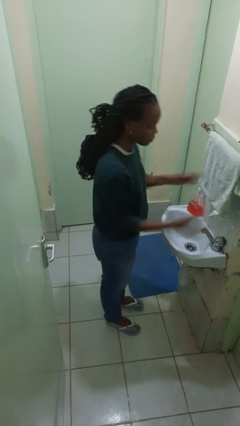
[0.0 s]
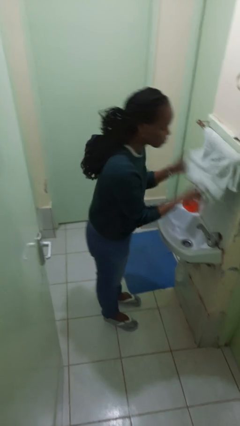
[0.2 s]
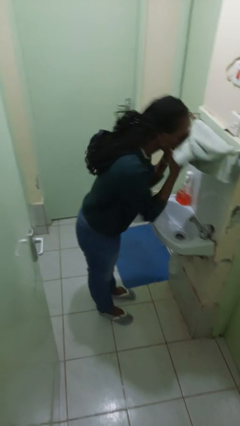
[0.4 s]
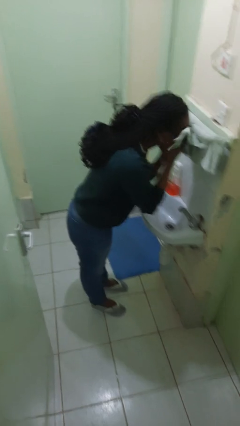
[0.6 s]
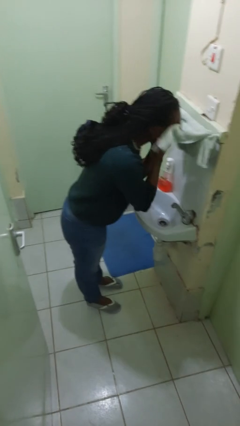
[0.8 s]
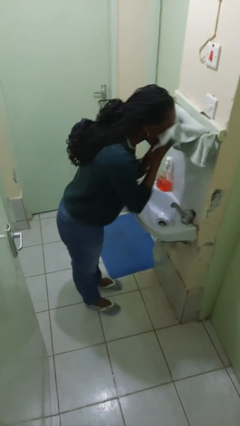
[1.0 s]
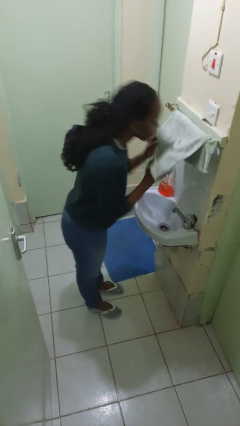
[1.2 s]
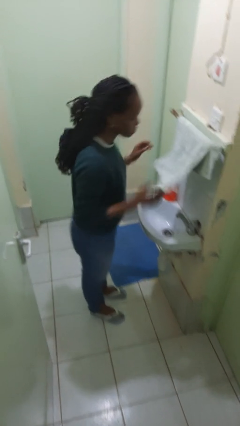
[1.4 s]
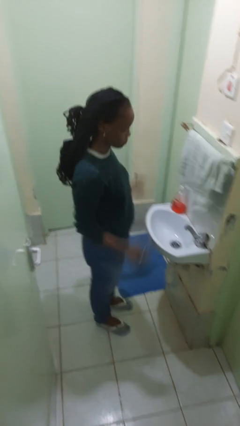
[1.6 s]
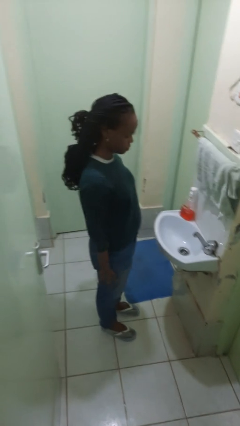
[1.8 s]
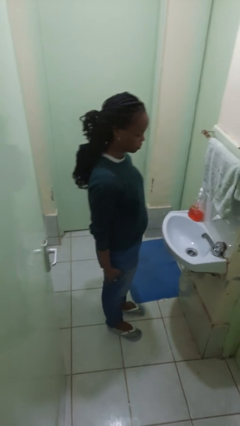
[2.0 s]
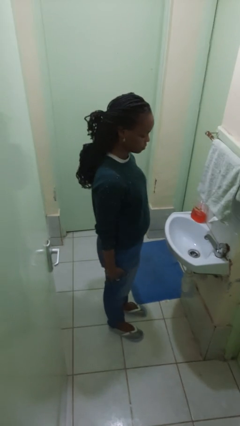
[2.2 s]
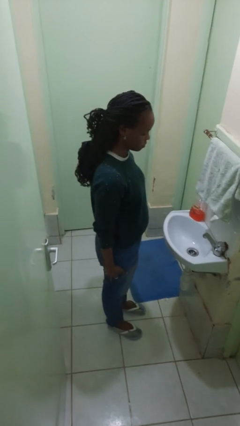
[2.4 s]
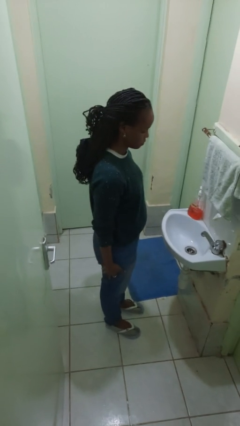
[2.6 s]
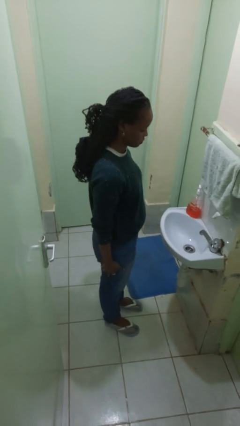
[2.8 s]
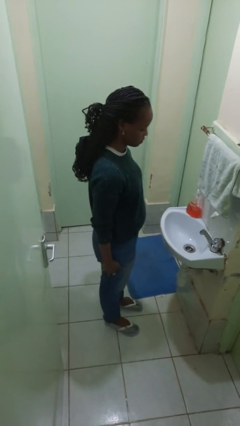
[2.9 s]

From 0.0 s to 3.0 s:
person dries face with towel

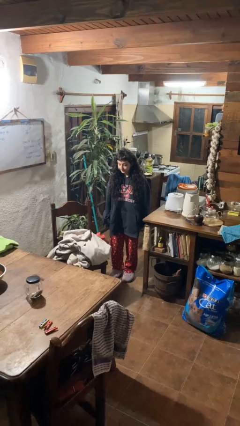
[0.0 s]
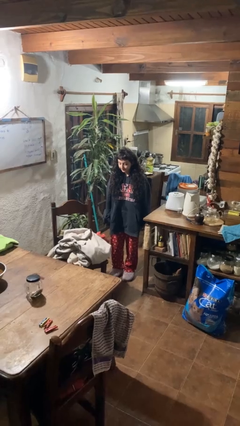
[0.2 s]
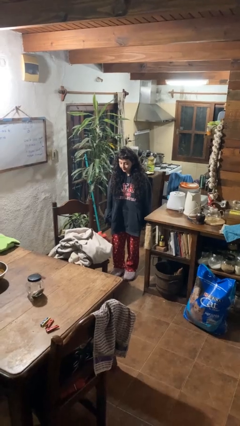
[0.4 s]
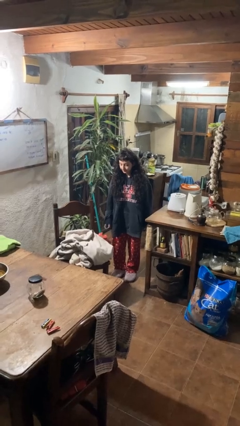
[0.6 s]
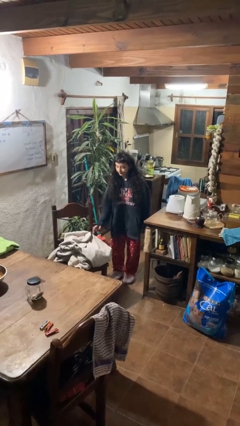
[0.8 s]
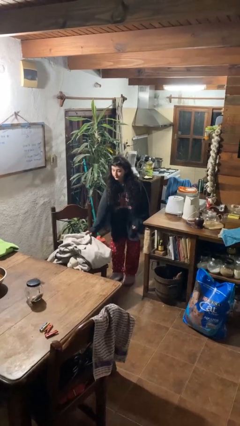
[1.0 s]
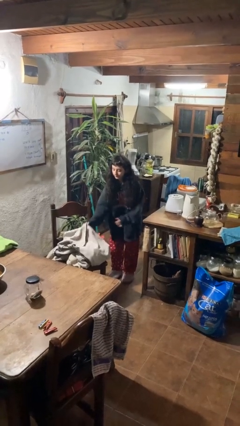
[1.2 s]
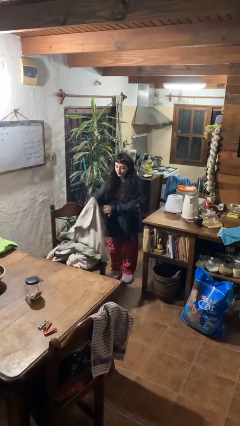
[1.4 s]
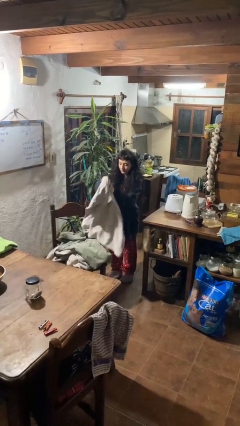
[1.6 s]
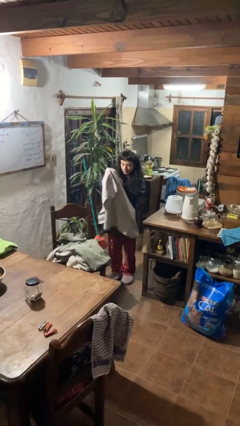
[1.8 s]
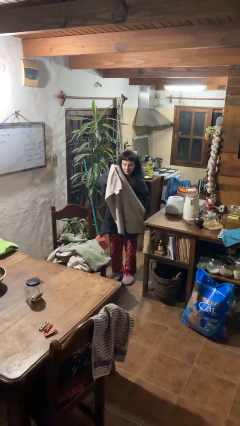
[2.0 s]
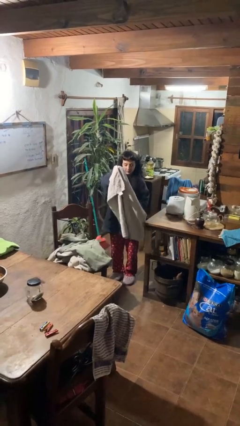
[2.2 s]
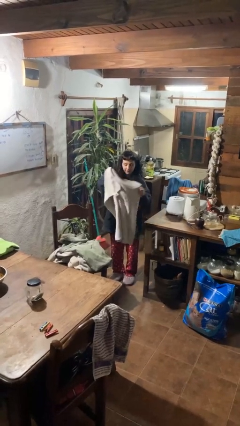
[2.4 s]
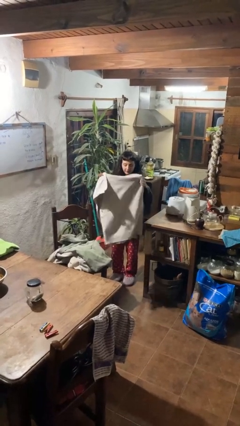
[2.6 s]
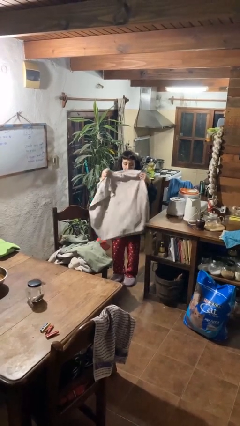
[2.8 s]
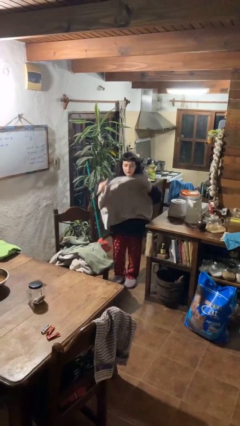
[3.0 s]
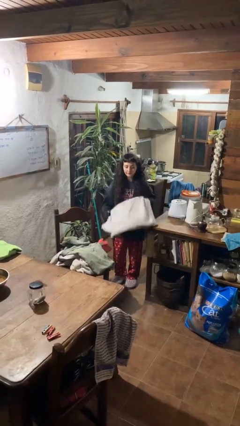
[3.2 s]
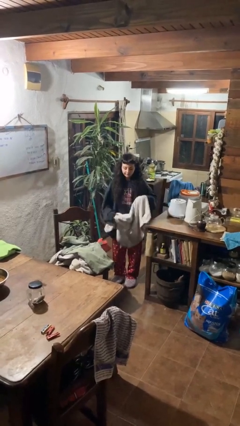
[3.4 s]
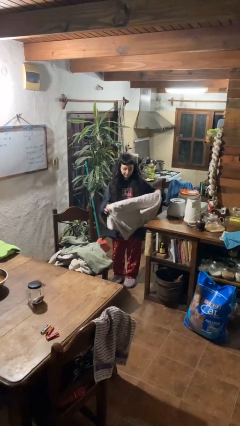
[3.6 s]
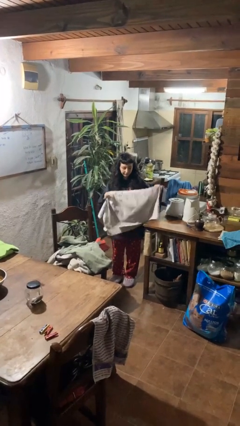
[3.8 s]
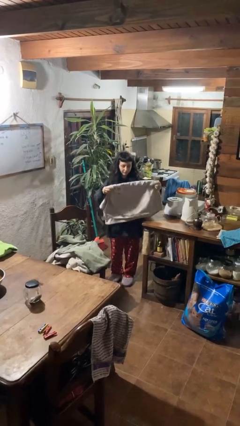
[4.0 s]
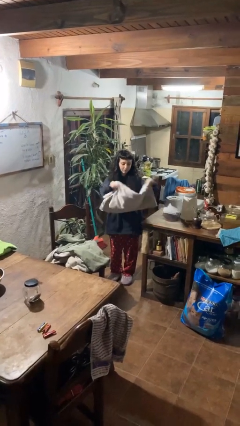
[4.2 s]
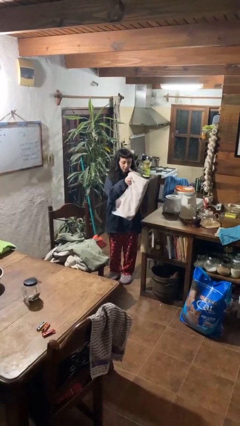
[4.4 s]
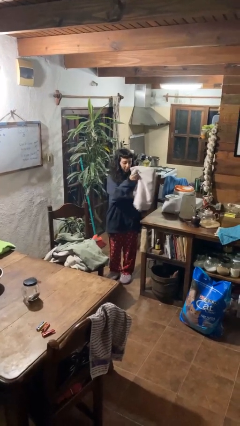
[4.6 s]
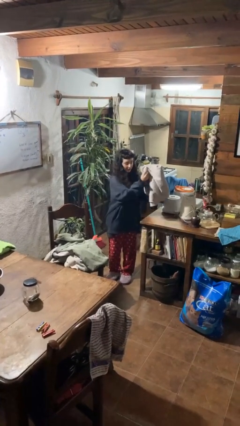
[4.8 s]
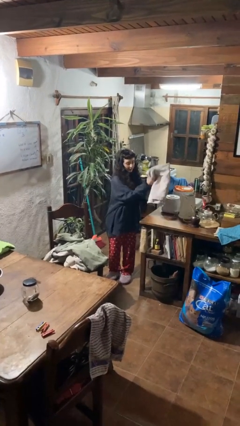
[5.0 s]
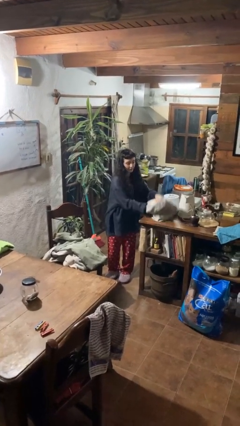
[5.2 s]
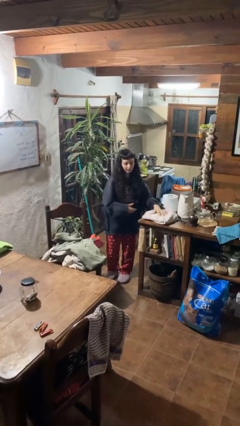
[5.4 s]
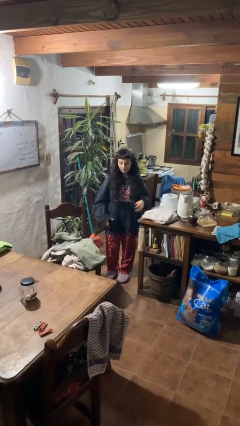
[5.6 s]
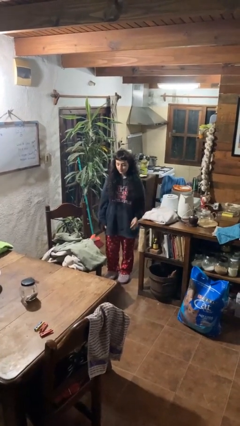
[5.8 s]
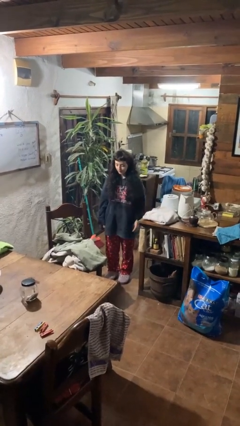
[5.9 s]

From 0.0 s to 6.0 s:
person folds towel

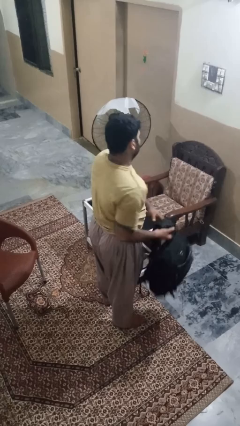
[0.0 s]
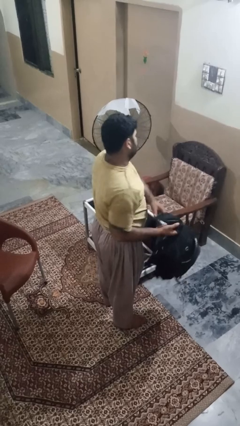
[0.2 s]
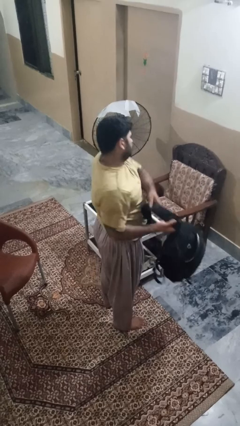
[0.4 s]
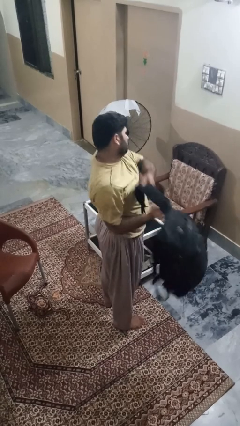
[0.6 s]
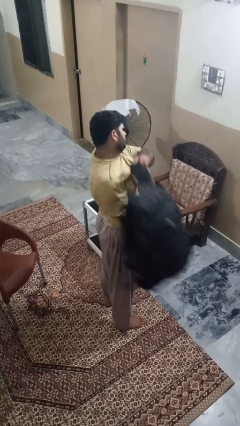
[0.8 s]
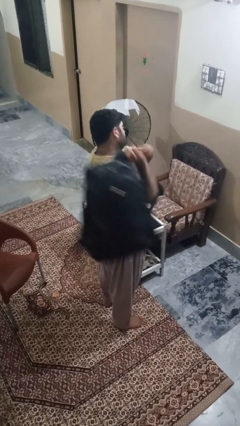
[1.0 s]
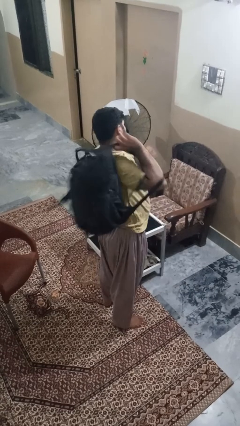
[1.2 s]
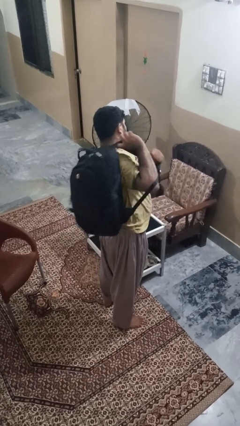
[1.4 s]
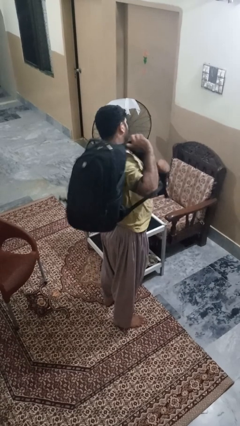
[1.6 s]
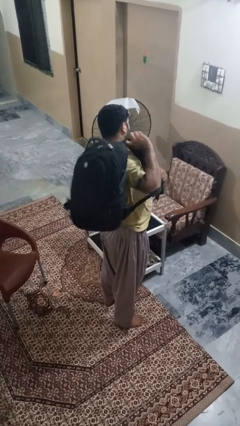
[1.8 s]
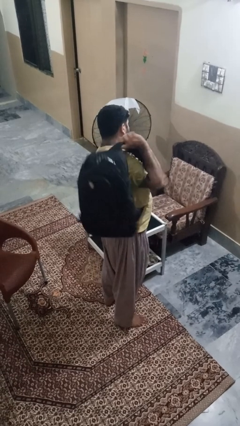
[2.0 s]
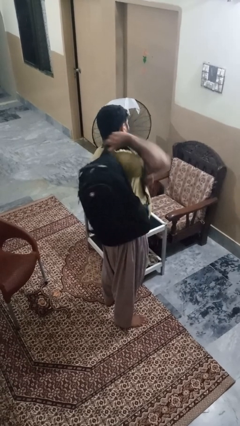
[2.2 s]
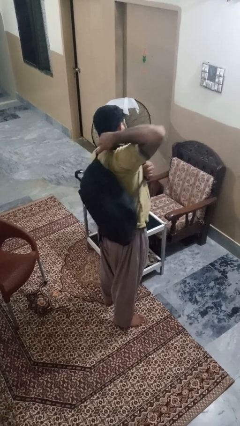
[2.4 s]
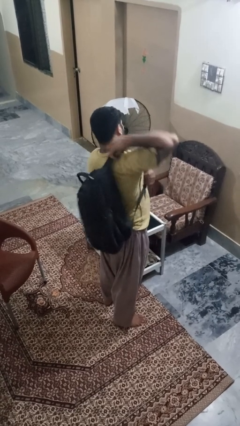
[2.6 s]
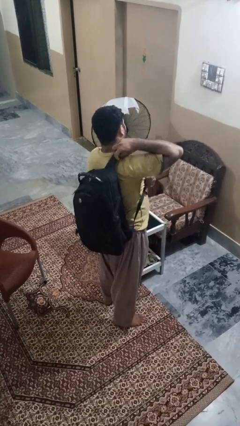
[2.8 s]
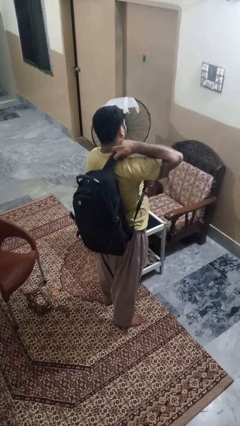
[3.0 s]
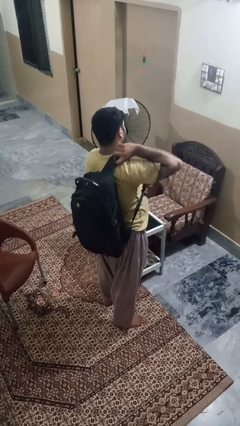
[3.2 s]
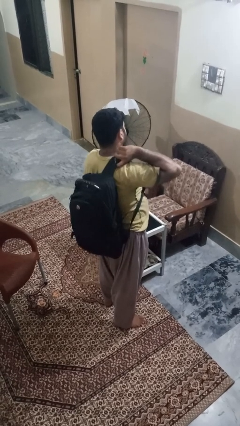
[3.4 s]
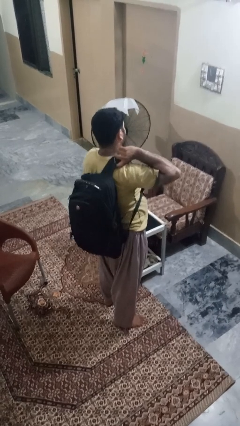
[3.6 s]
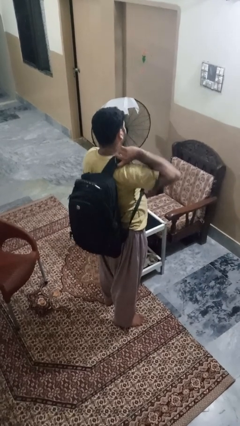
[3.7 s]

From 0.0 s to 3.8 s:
person puts on backpack

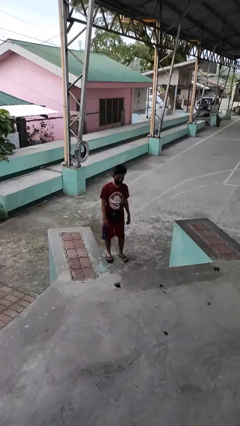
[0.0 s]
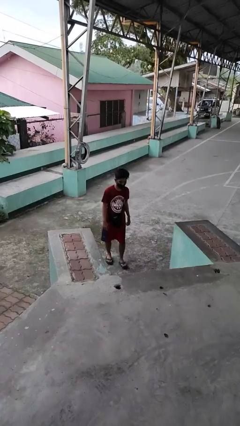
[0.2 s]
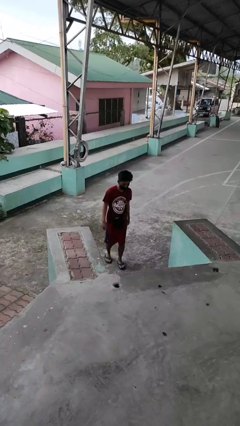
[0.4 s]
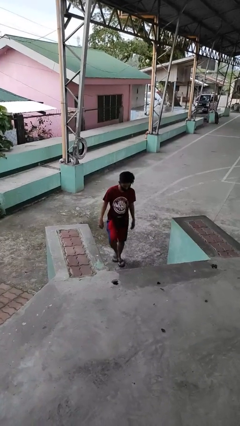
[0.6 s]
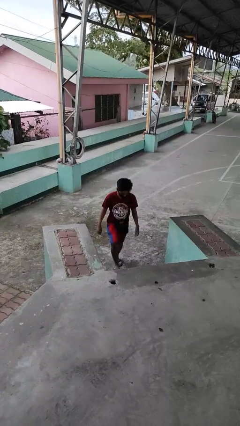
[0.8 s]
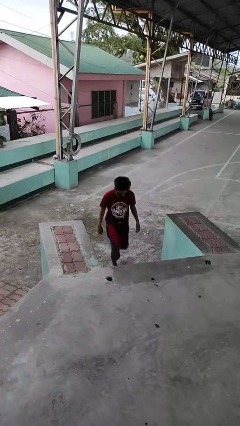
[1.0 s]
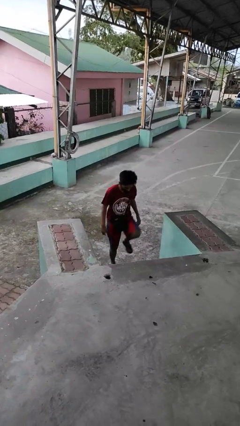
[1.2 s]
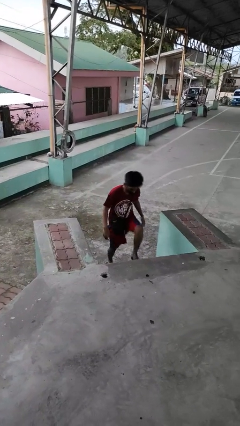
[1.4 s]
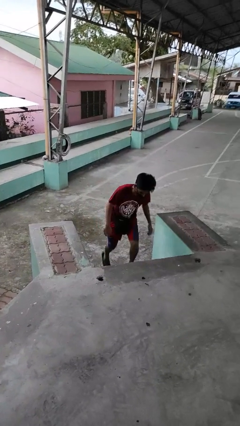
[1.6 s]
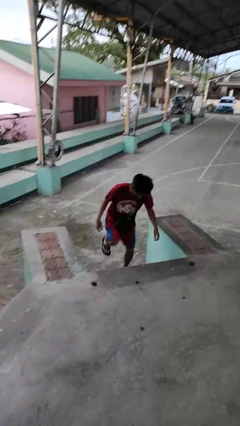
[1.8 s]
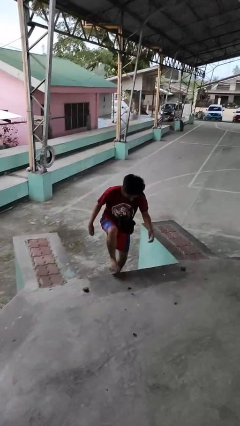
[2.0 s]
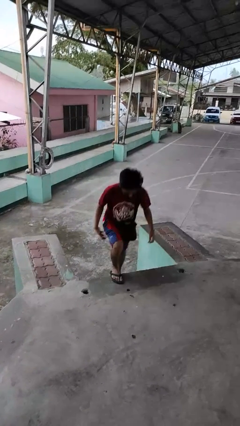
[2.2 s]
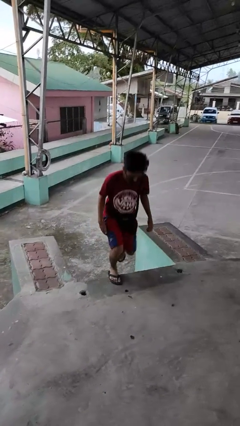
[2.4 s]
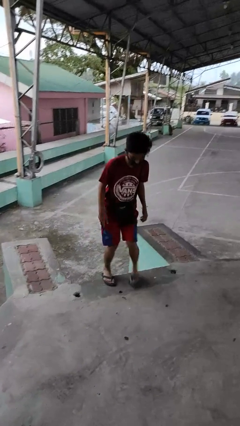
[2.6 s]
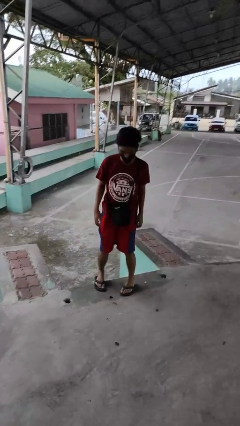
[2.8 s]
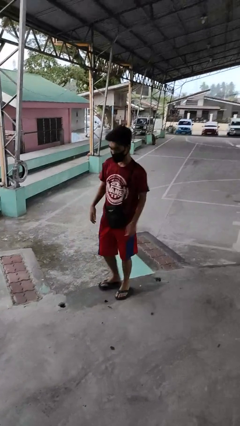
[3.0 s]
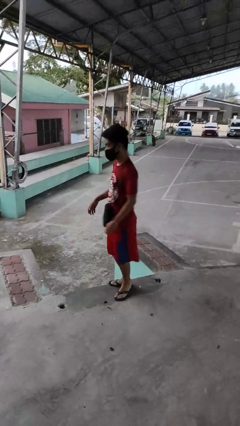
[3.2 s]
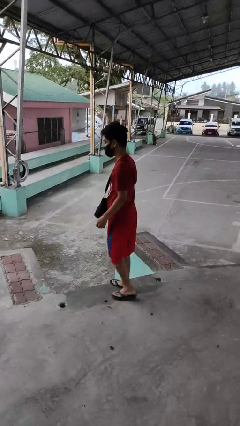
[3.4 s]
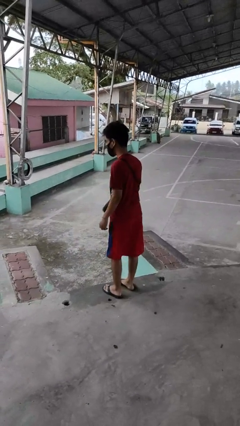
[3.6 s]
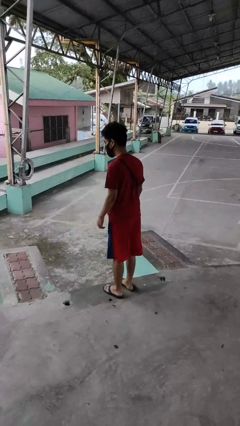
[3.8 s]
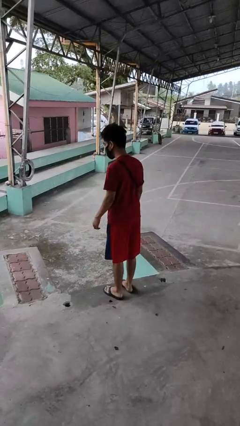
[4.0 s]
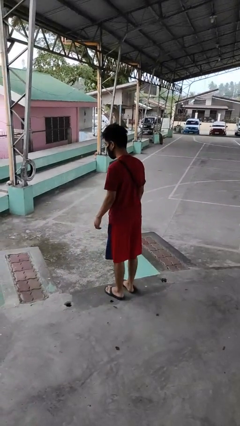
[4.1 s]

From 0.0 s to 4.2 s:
person climbs up stairs

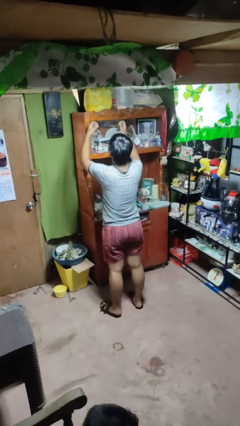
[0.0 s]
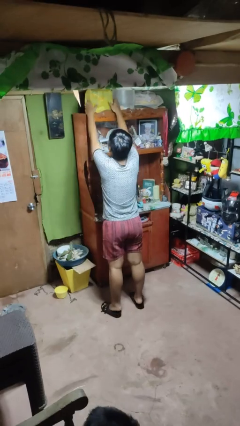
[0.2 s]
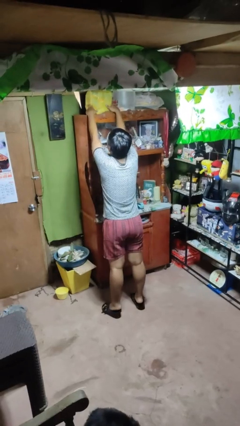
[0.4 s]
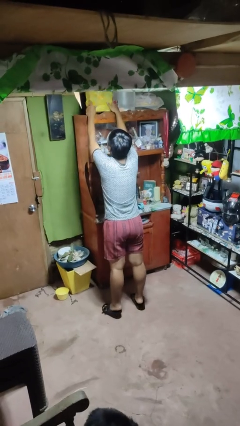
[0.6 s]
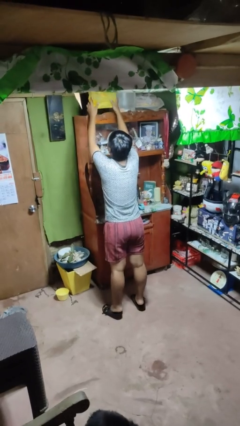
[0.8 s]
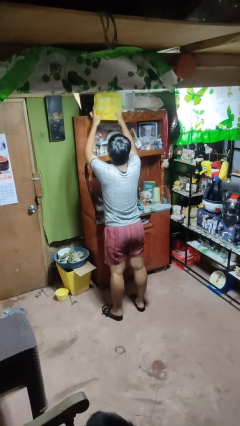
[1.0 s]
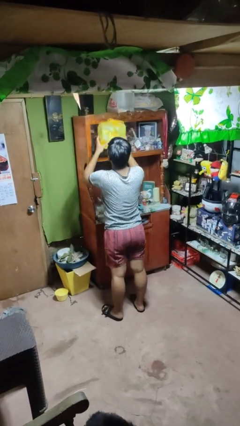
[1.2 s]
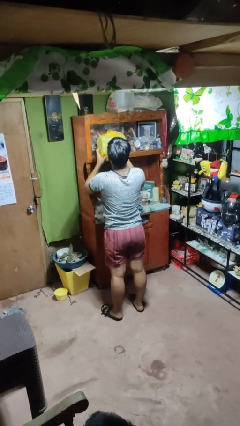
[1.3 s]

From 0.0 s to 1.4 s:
person picks up object from shelf
